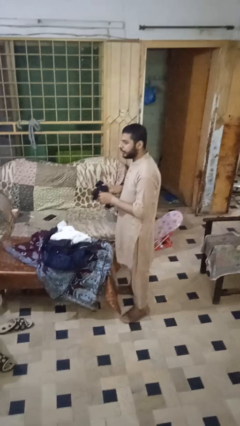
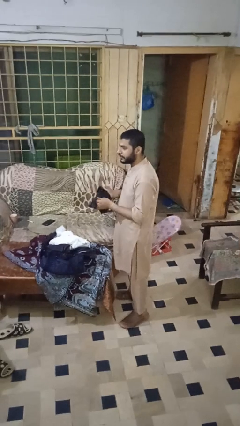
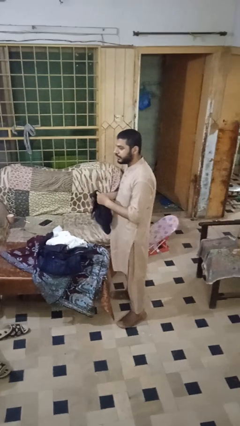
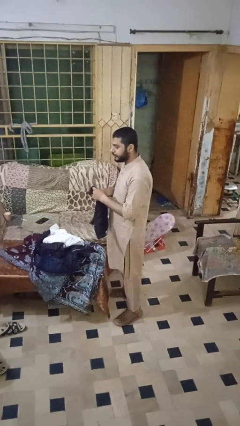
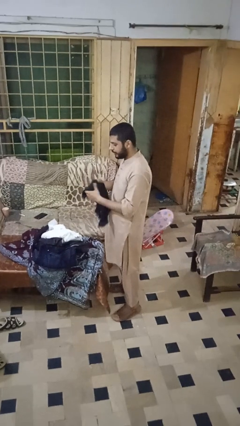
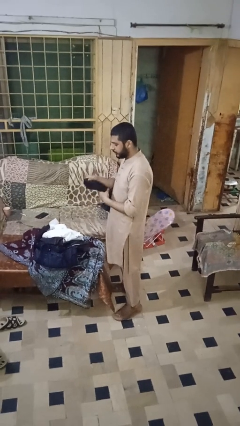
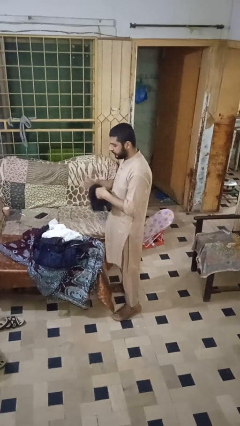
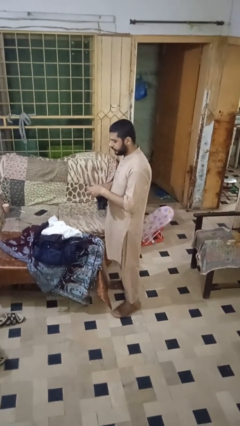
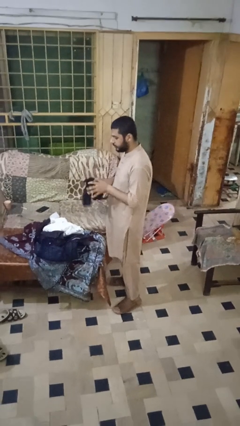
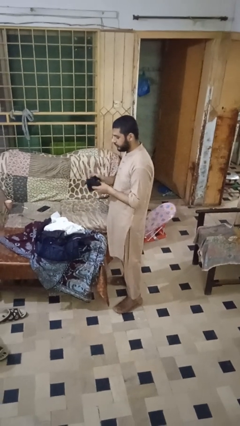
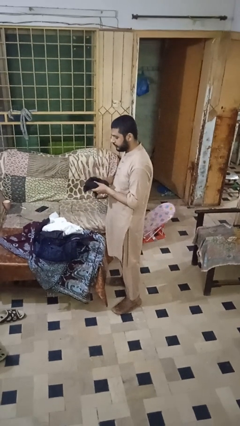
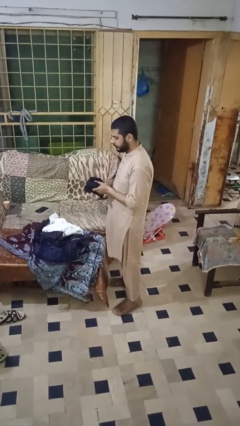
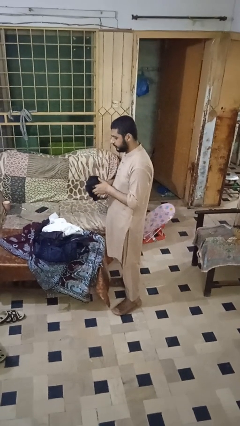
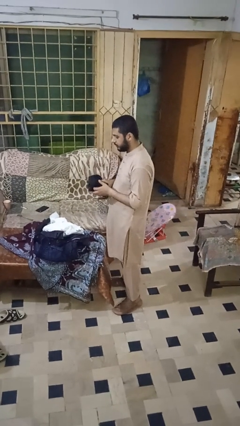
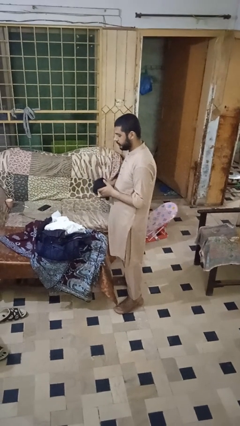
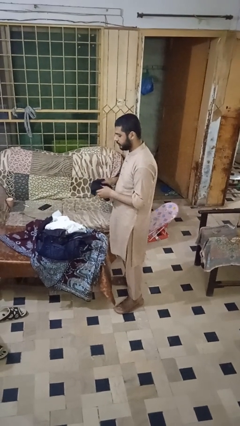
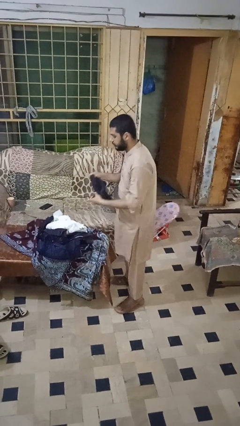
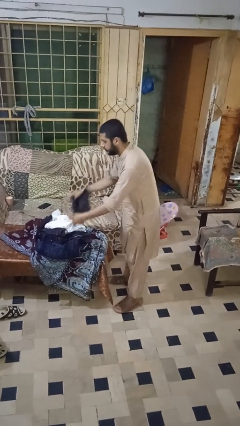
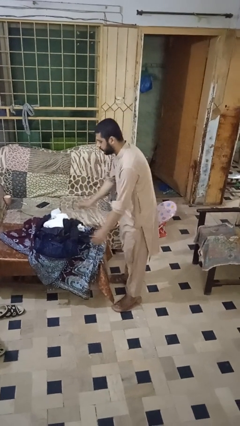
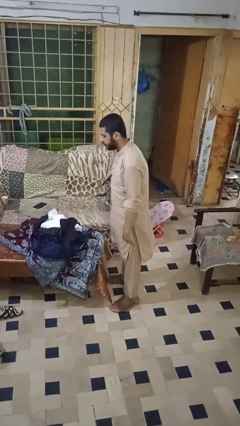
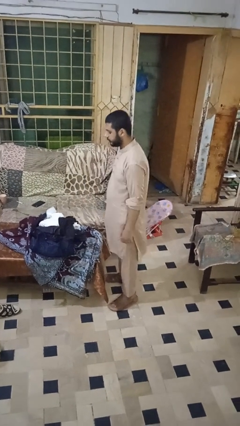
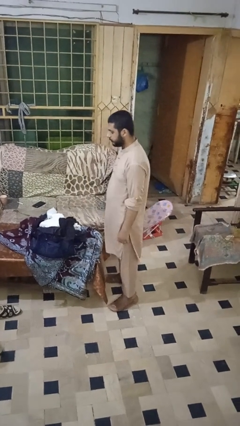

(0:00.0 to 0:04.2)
person folds shirt

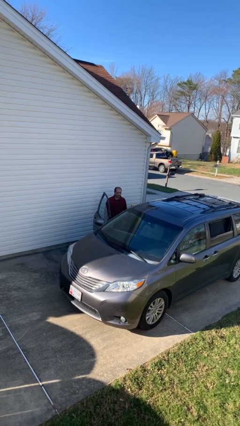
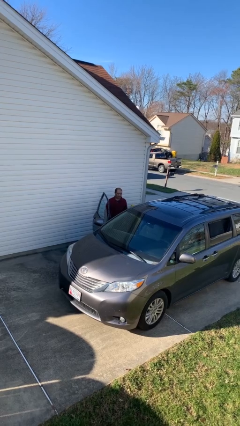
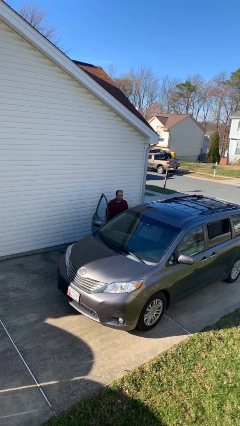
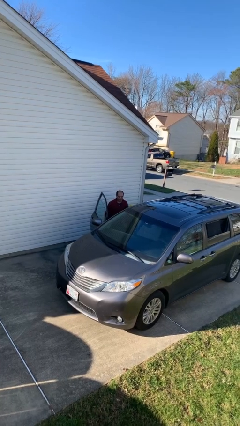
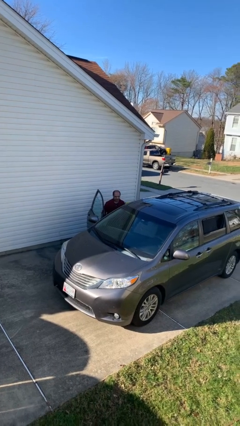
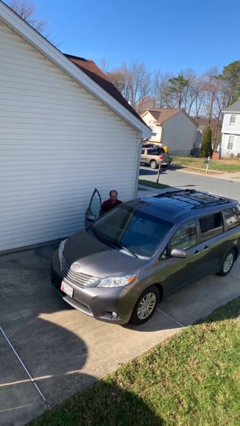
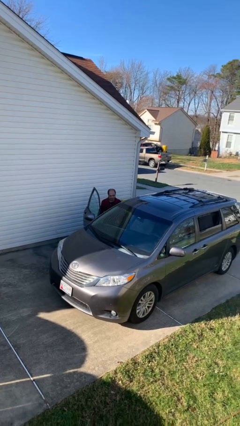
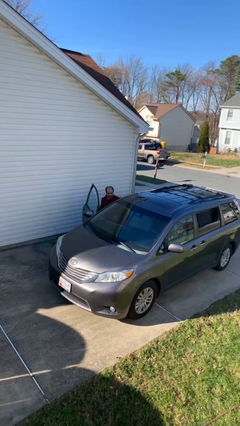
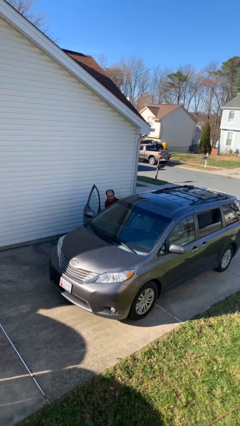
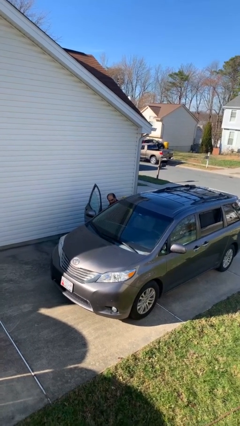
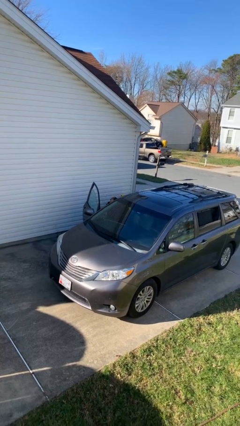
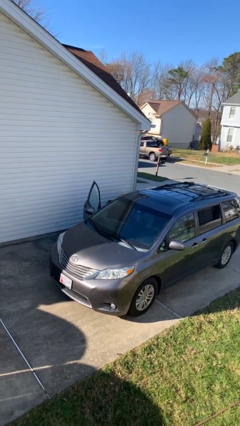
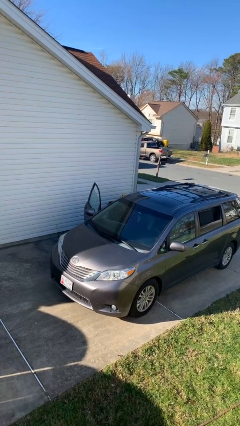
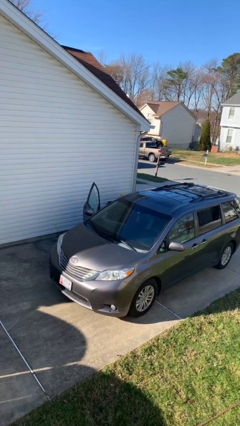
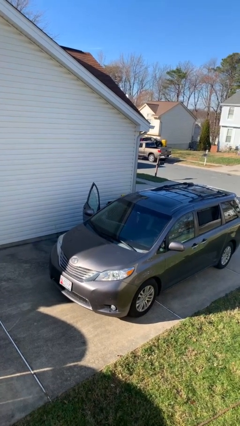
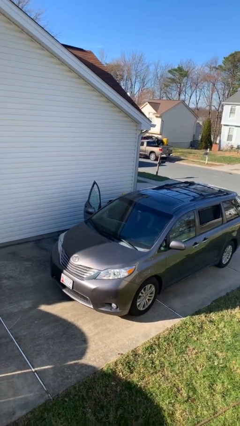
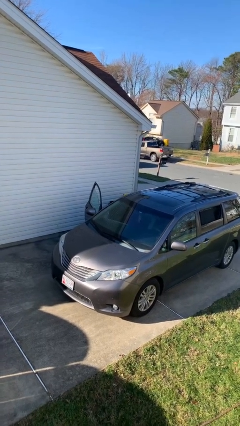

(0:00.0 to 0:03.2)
person enters car

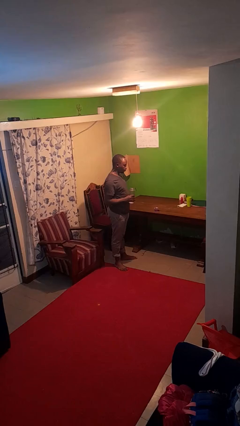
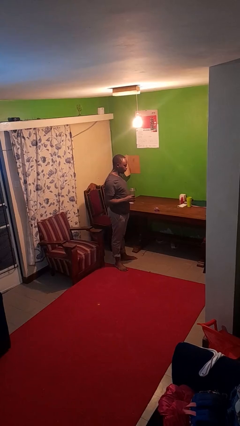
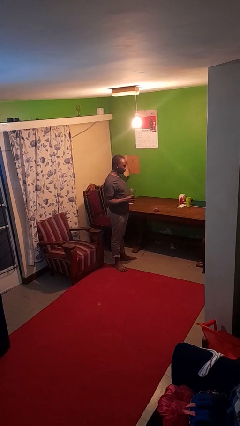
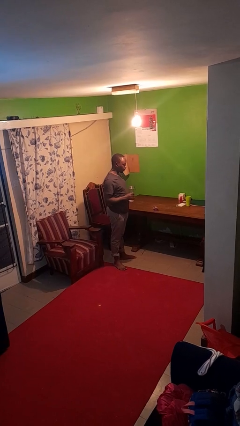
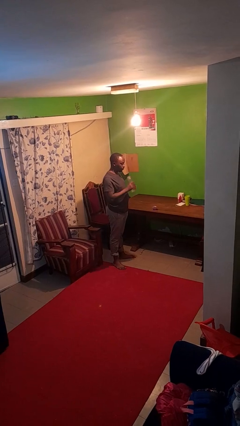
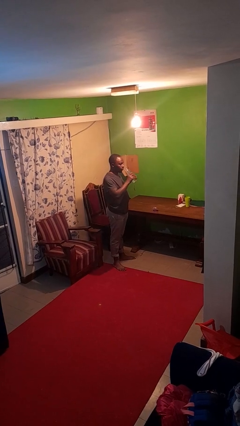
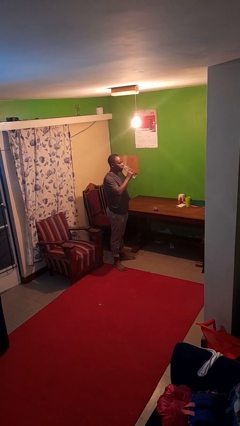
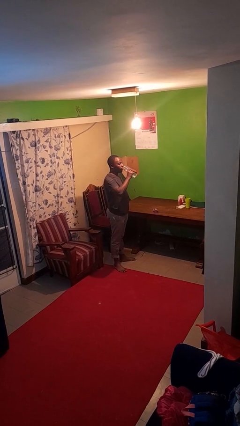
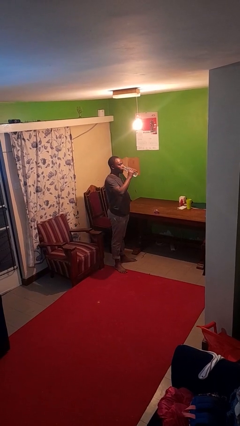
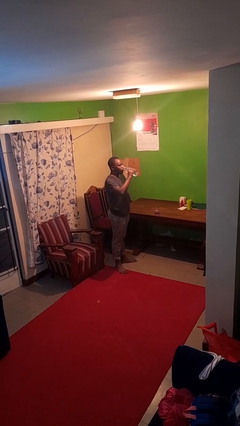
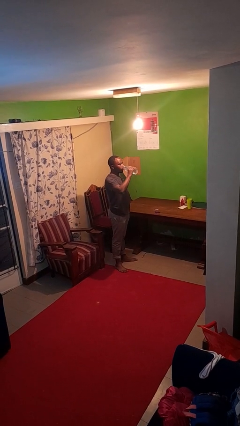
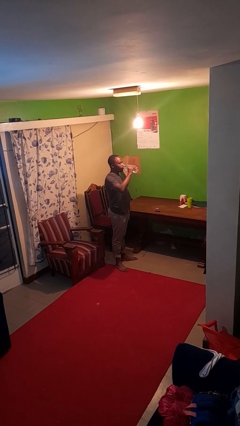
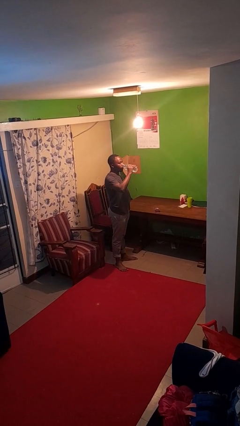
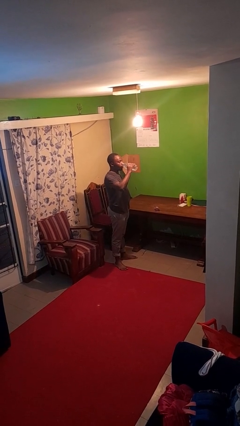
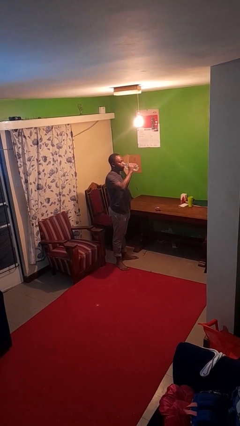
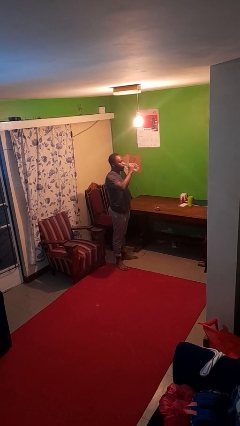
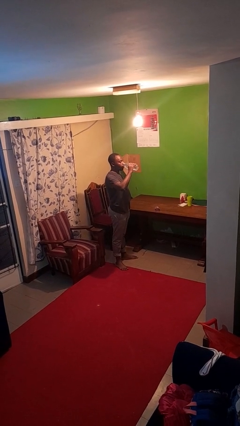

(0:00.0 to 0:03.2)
person drinks from bottle

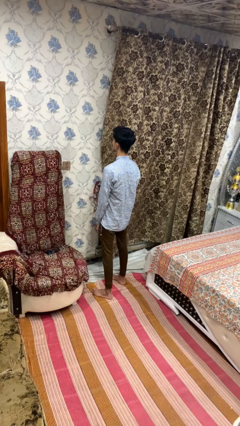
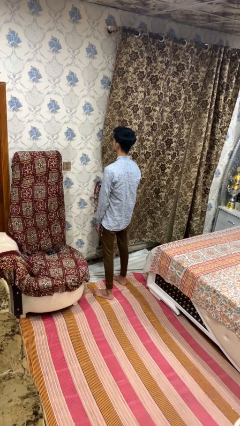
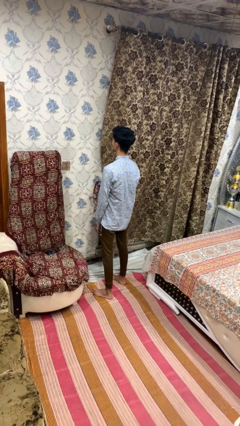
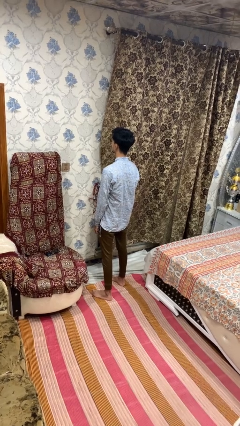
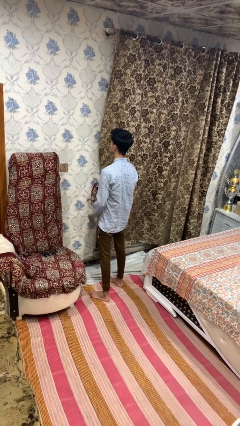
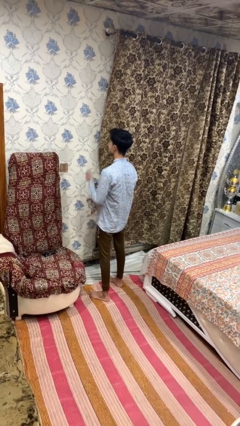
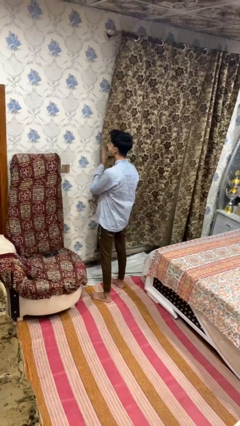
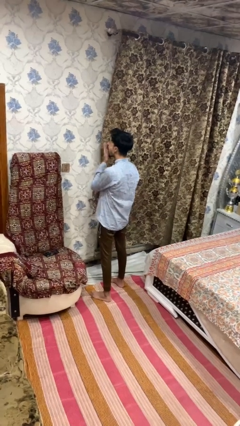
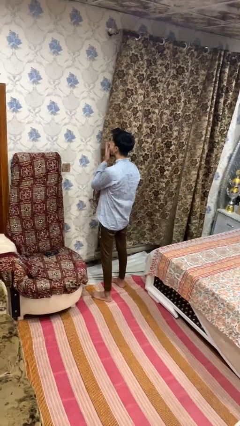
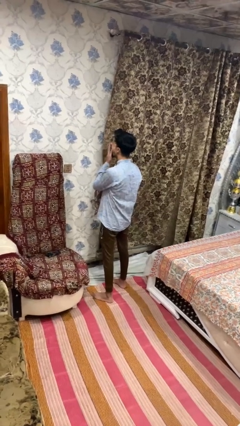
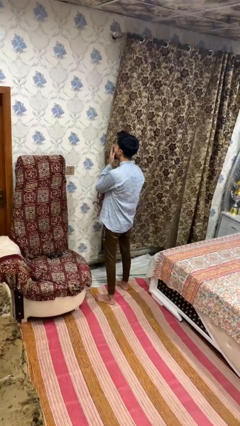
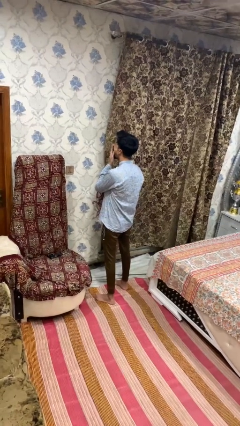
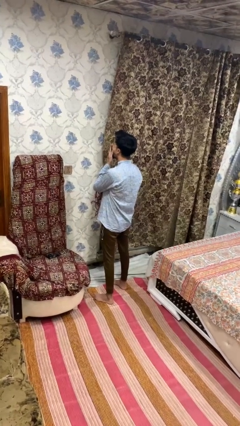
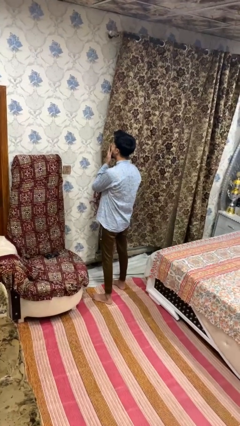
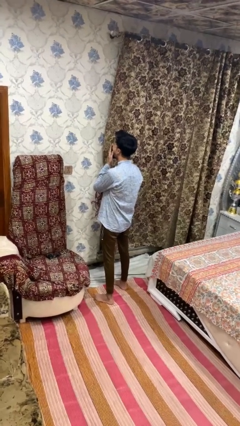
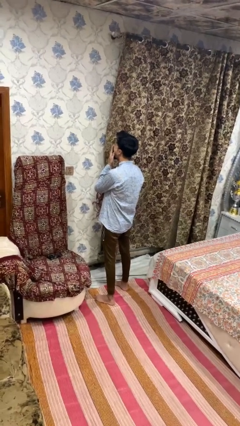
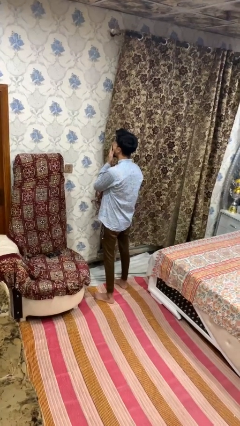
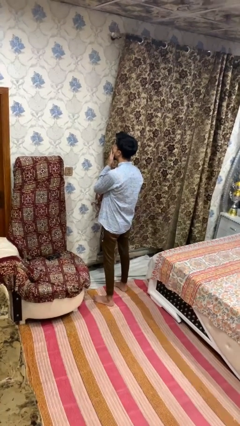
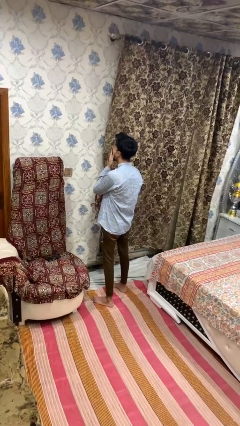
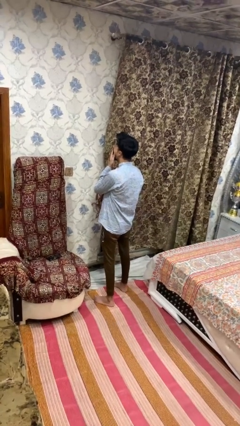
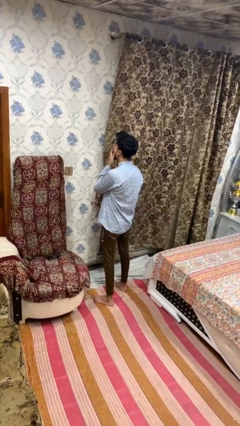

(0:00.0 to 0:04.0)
person yawns

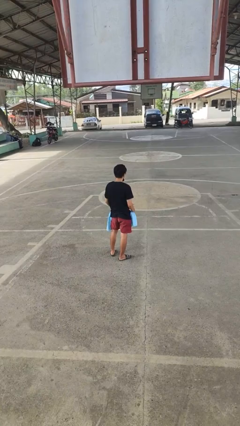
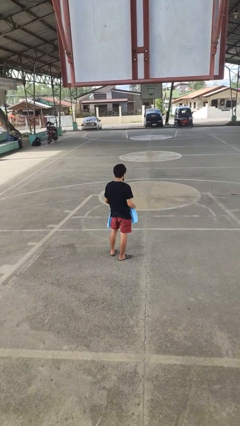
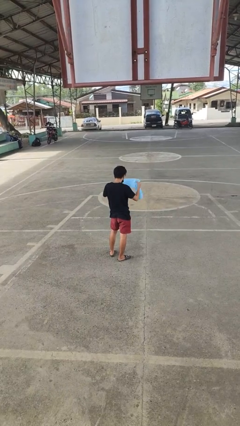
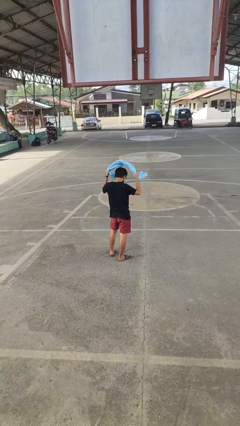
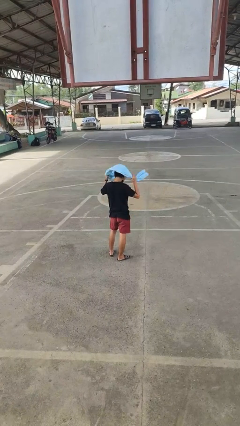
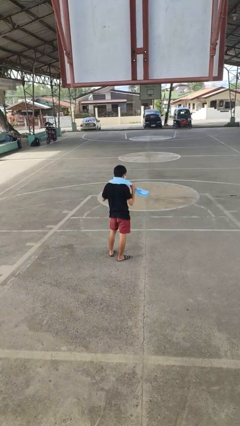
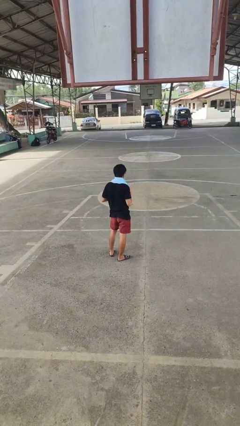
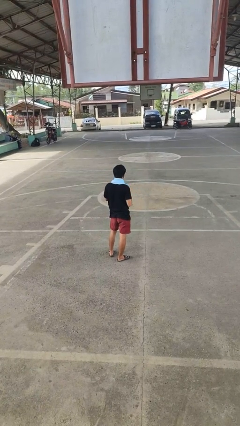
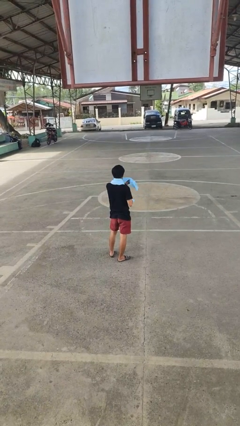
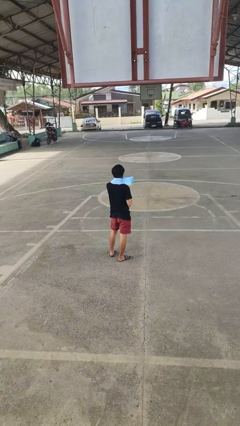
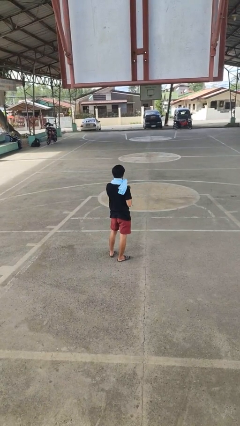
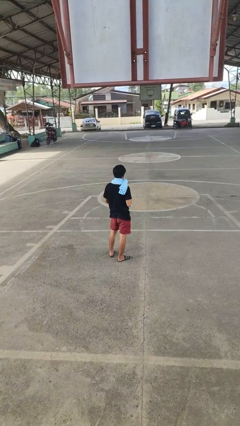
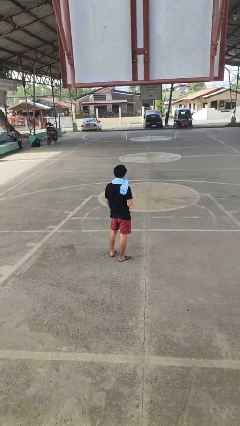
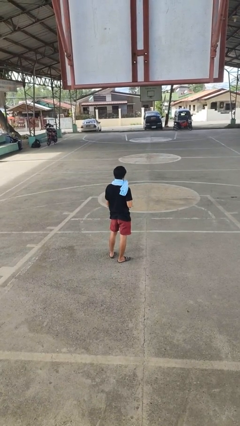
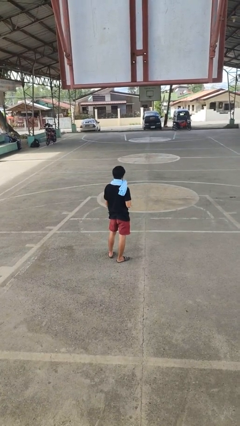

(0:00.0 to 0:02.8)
person puts on scarf
